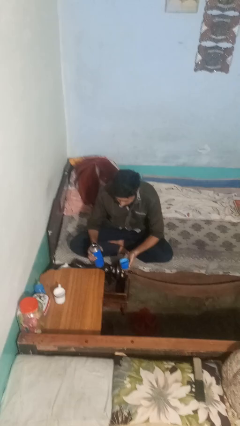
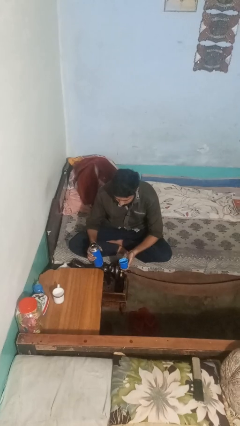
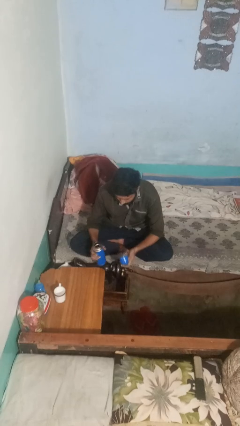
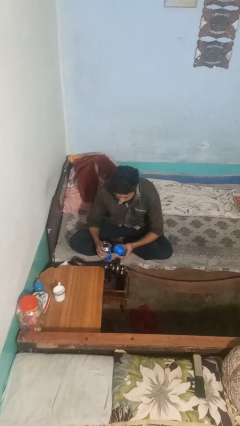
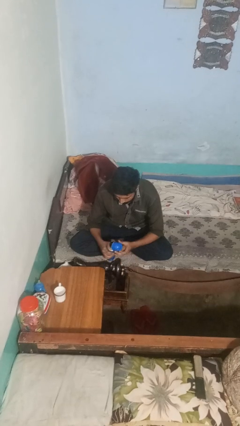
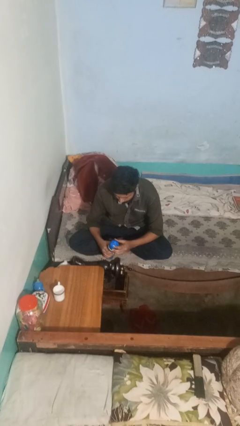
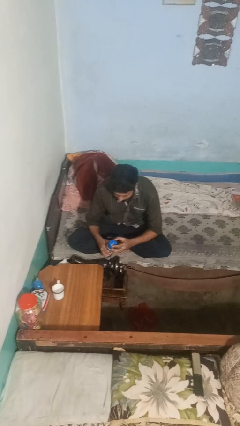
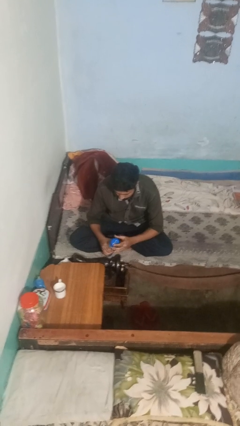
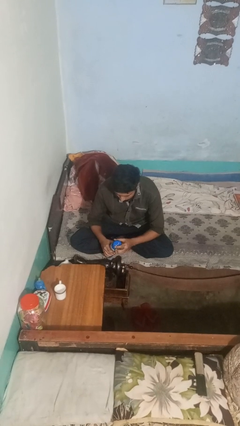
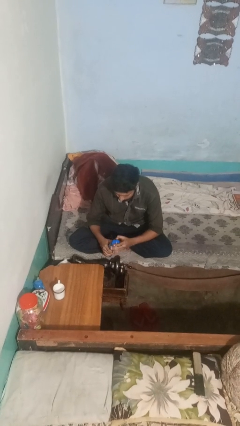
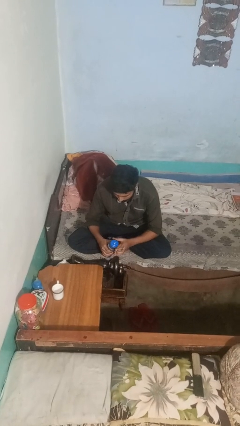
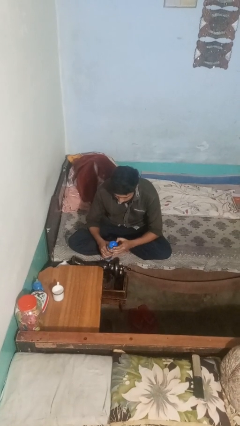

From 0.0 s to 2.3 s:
person screws lid to bottle

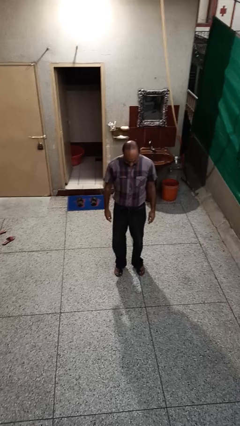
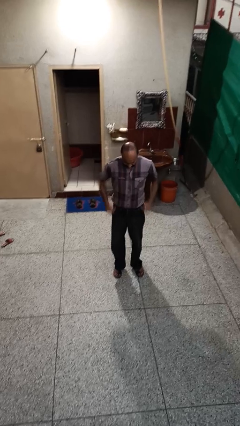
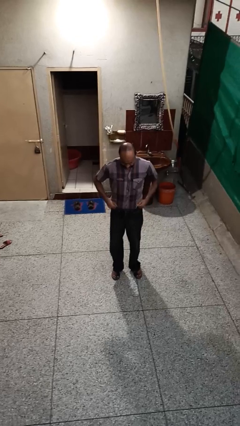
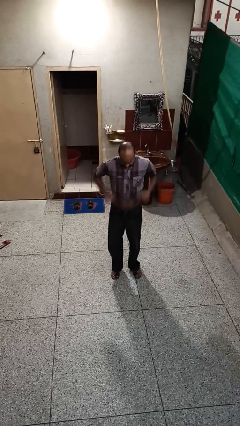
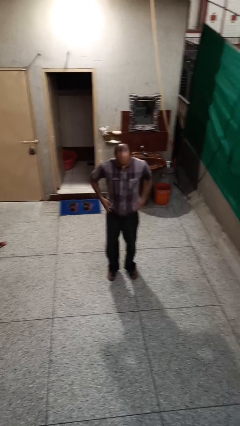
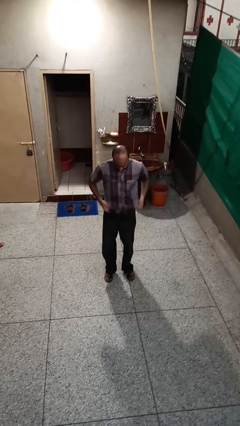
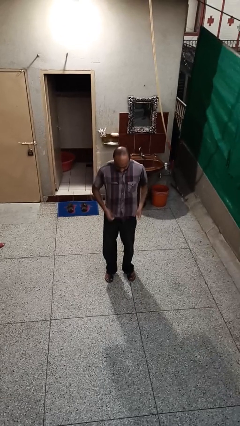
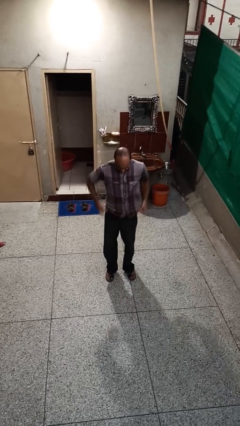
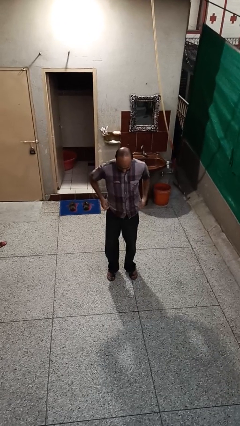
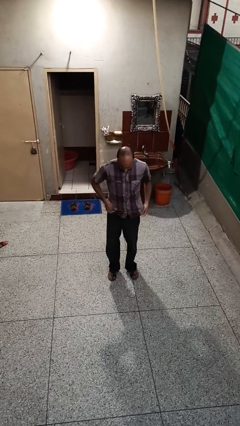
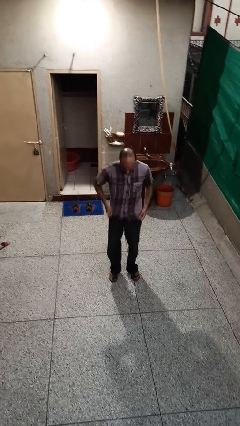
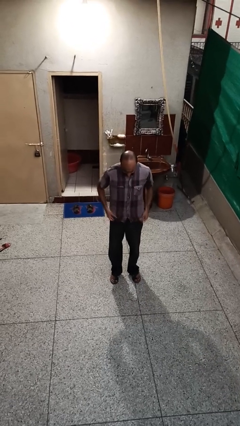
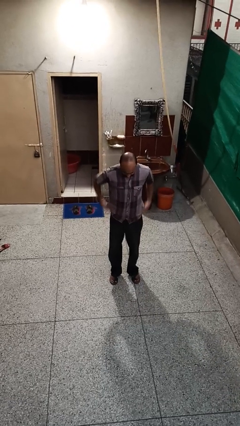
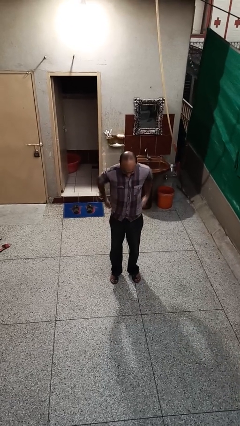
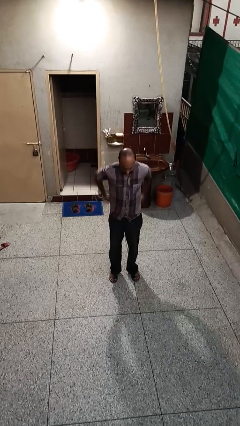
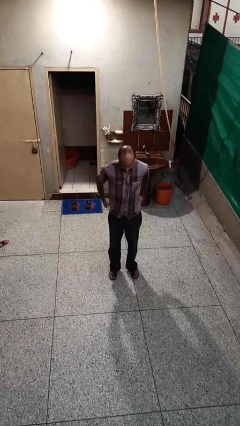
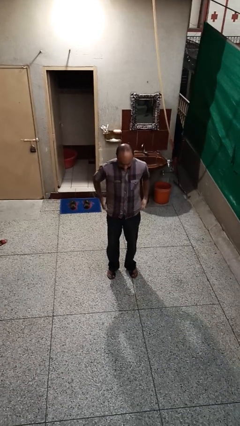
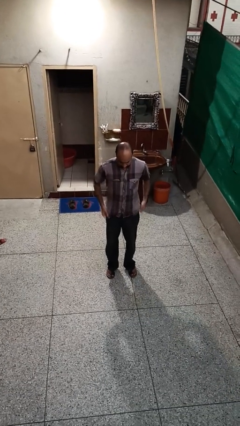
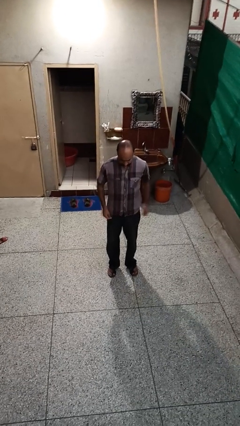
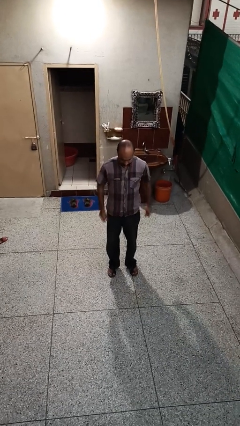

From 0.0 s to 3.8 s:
person untucks shirt

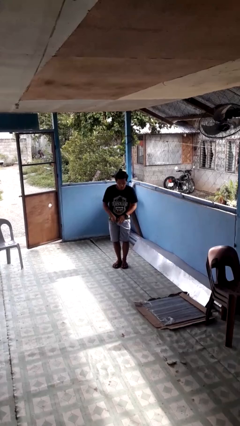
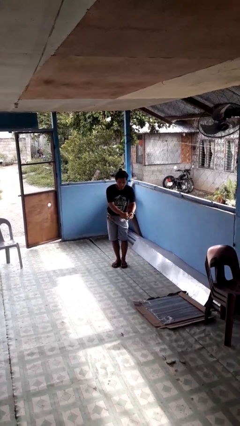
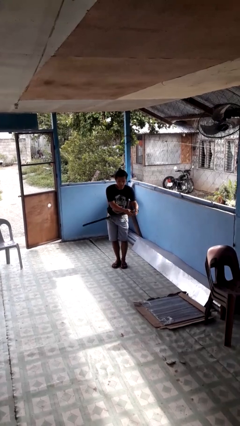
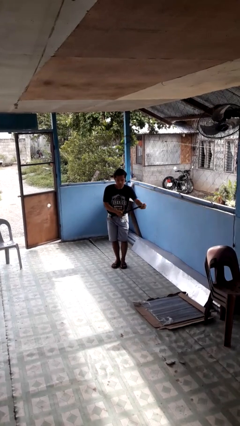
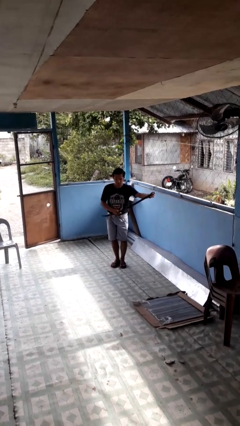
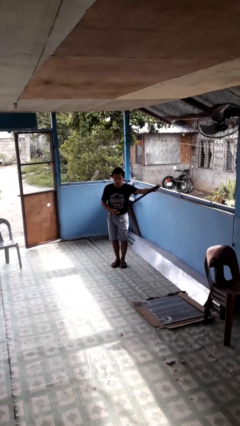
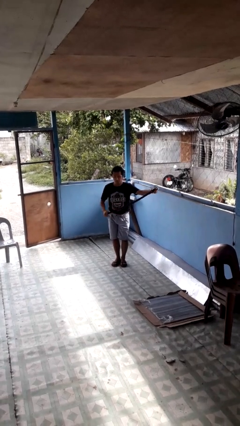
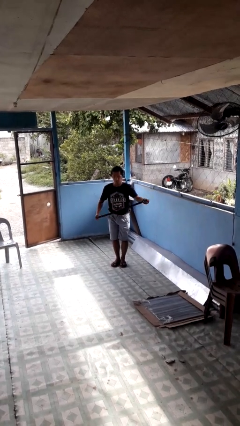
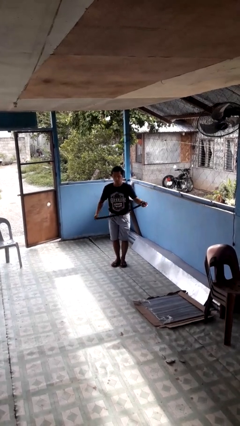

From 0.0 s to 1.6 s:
person takes off belt

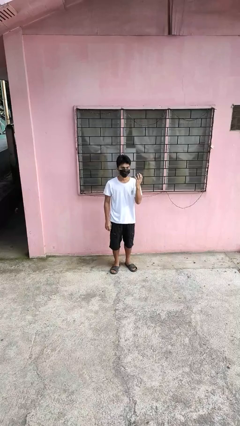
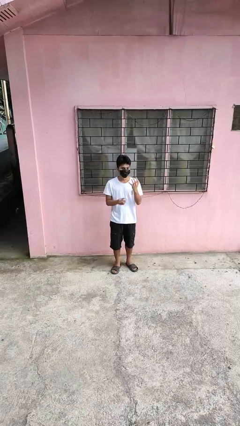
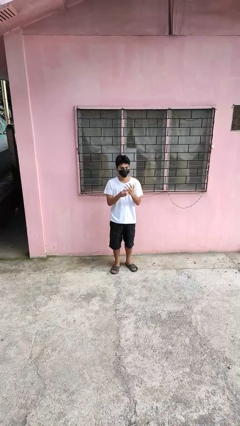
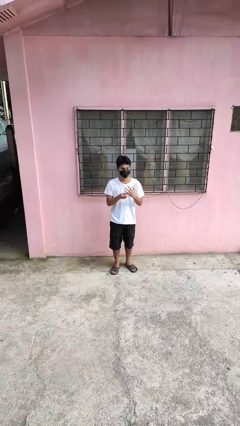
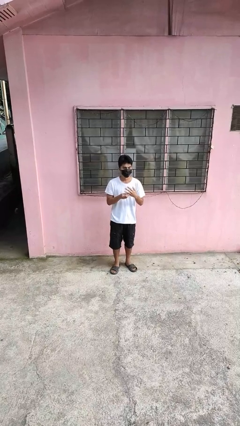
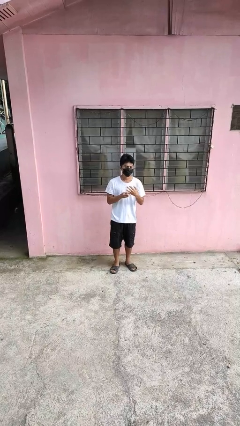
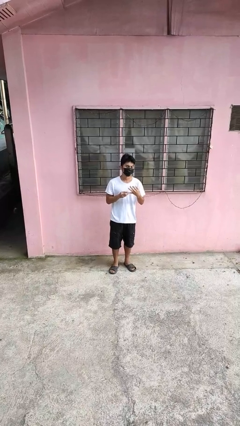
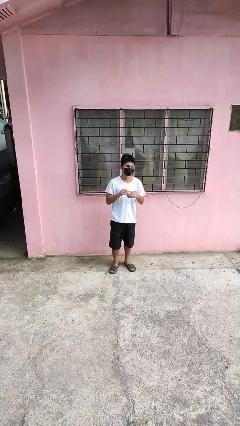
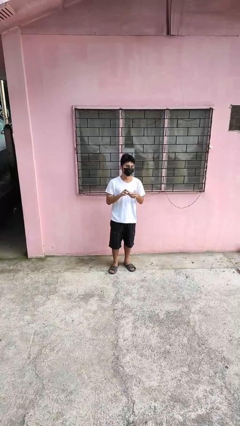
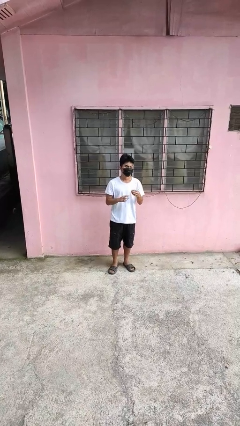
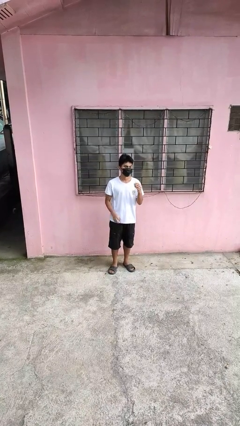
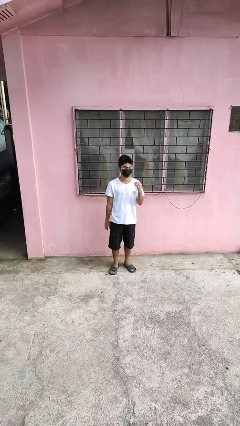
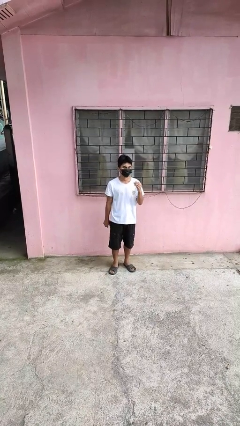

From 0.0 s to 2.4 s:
person takes off ring

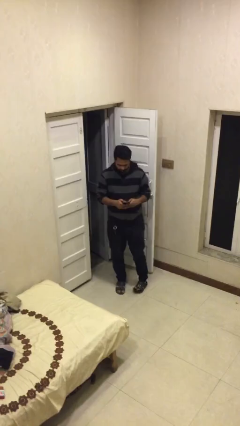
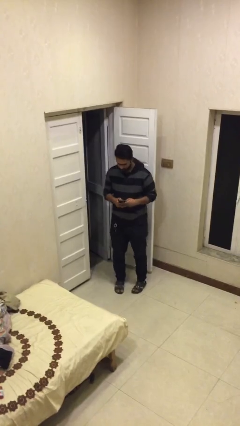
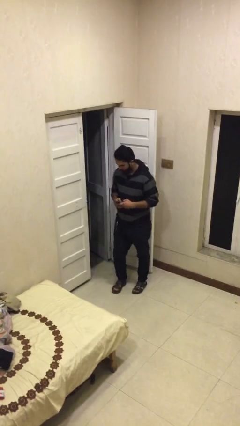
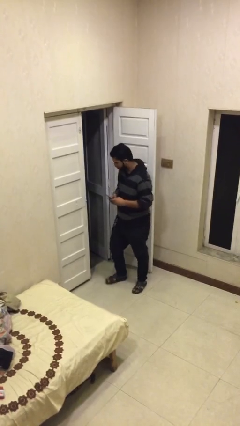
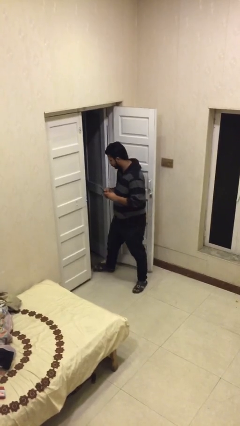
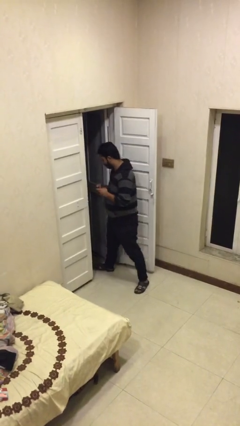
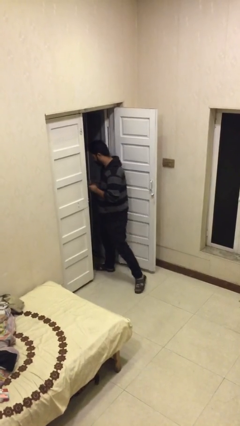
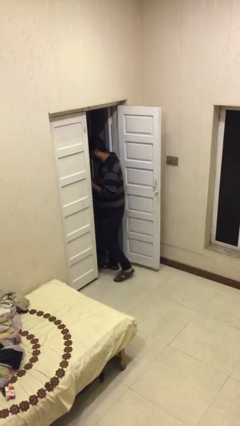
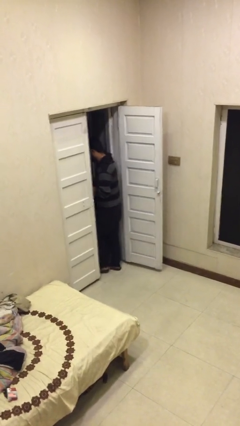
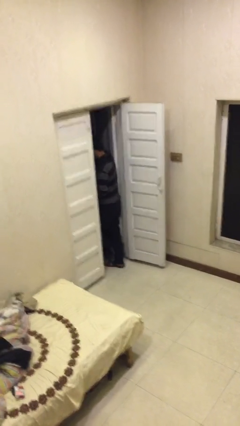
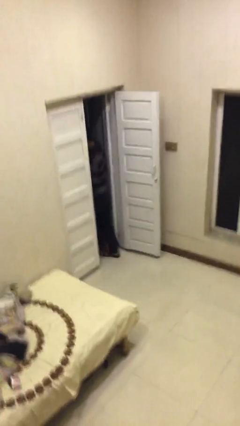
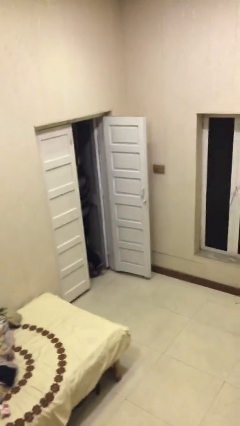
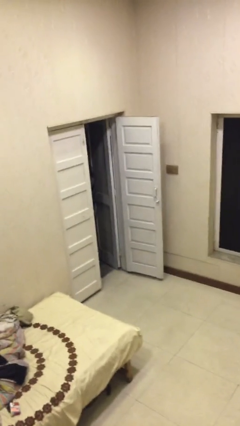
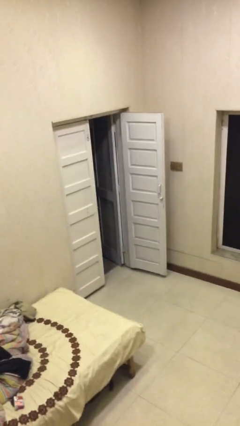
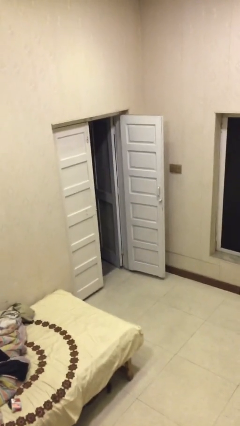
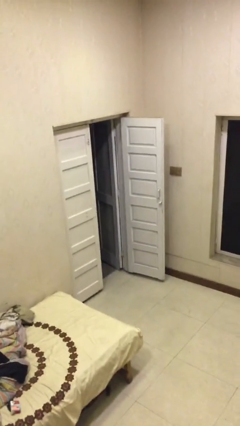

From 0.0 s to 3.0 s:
person exits scene through structure

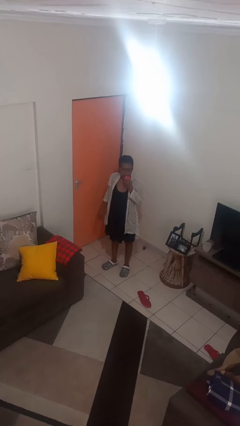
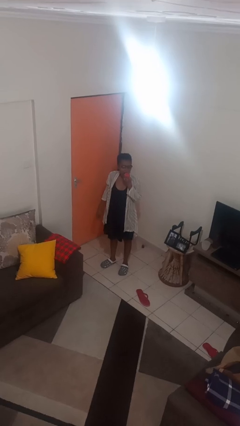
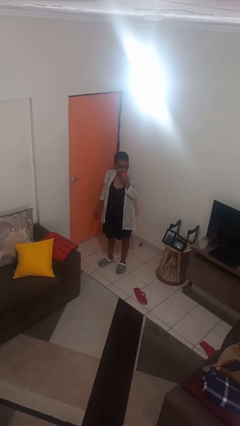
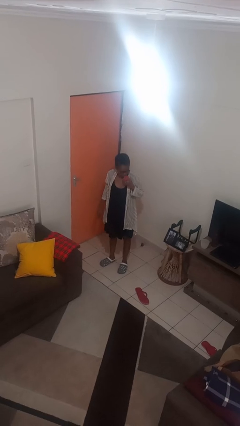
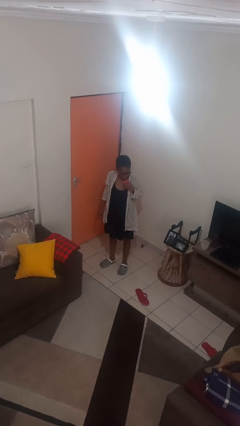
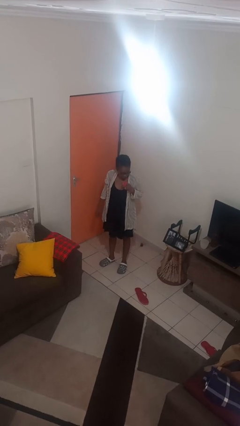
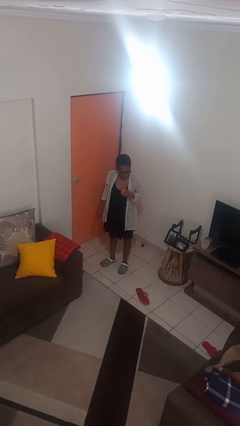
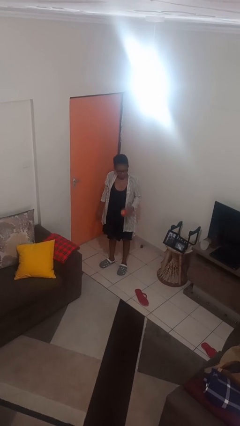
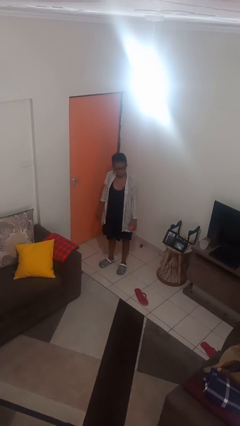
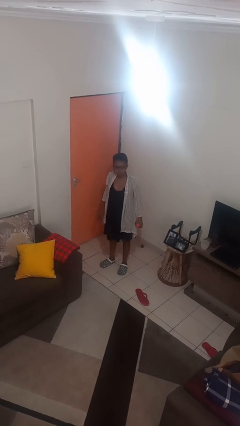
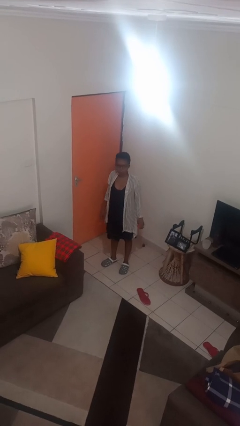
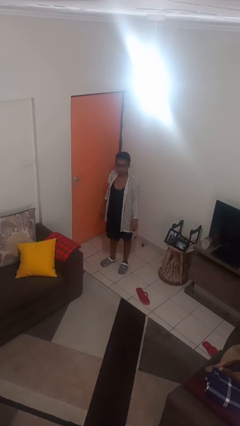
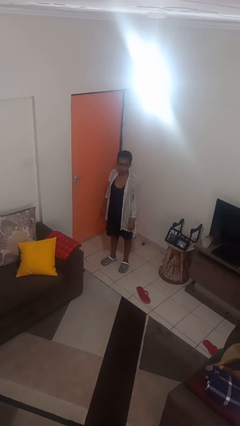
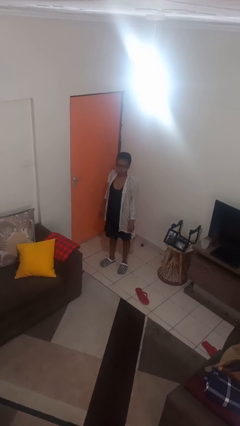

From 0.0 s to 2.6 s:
person eats apple

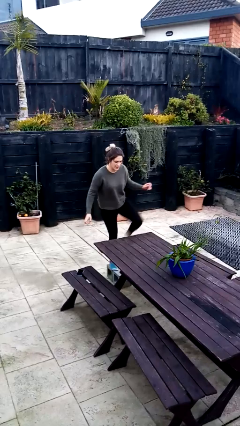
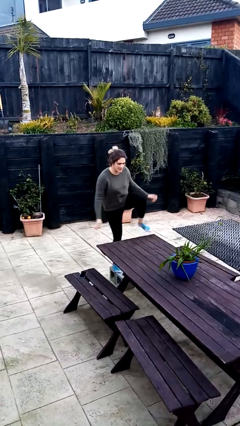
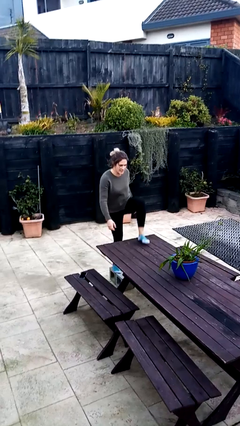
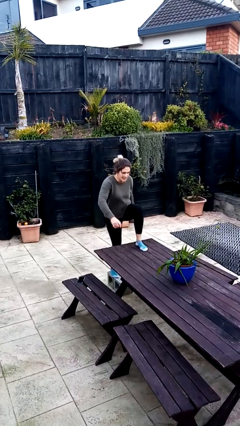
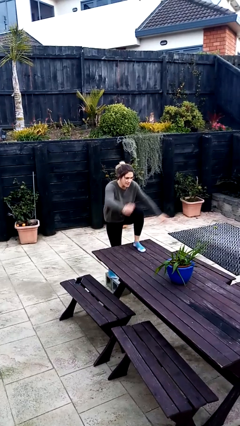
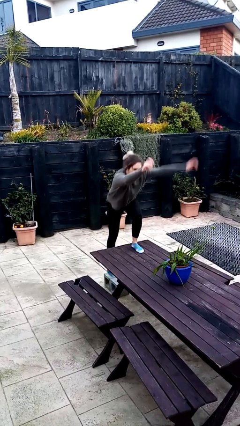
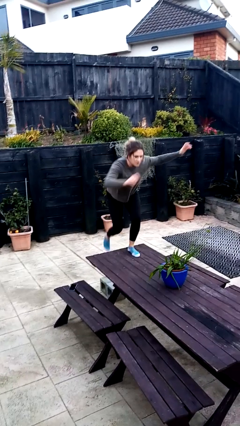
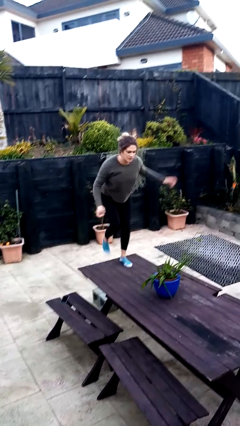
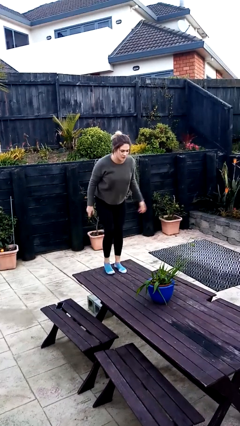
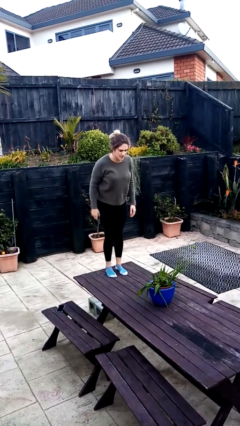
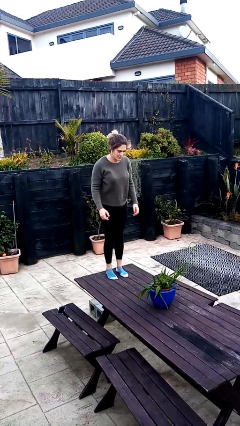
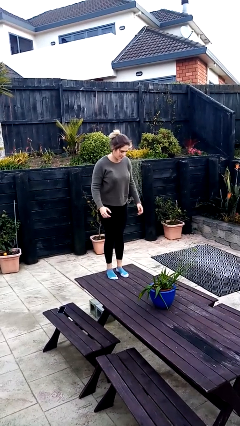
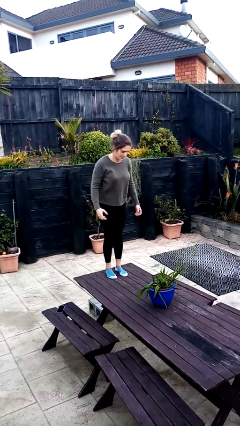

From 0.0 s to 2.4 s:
person climbs on table
